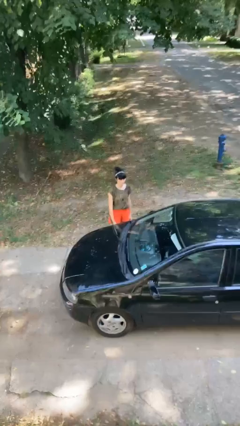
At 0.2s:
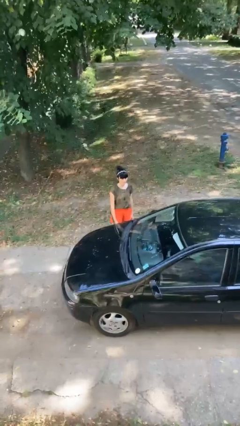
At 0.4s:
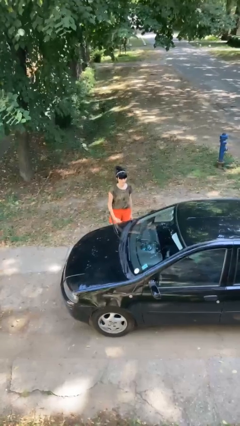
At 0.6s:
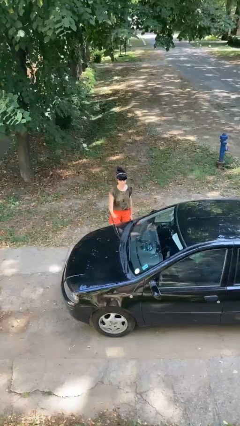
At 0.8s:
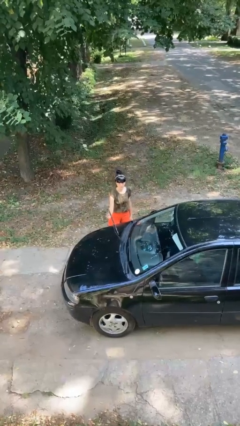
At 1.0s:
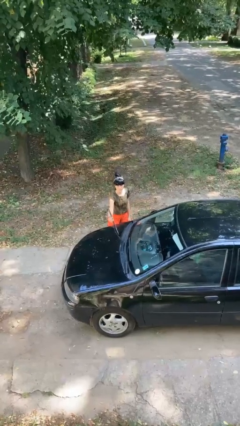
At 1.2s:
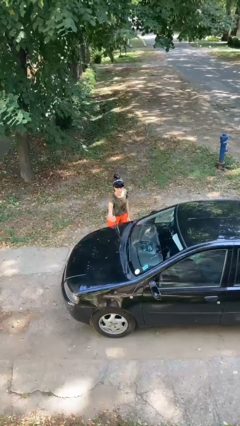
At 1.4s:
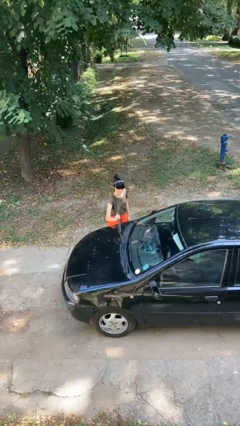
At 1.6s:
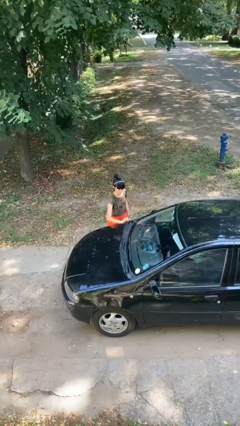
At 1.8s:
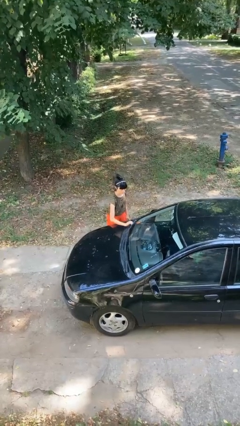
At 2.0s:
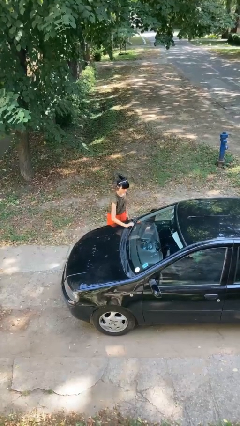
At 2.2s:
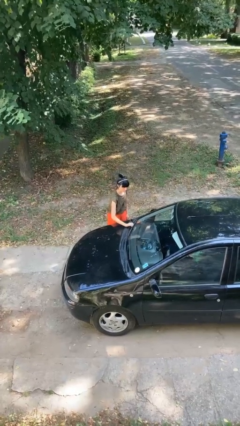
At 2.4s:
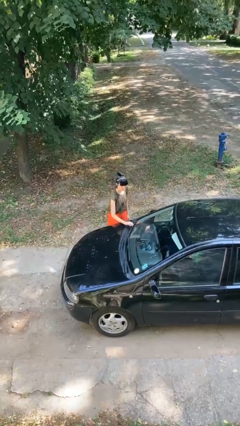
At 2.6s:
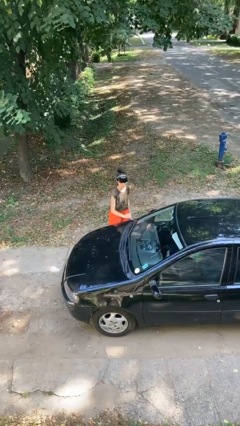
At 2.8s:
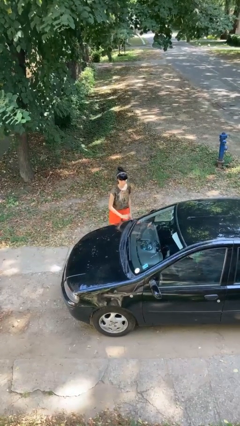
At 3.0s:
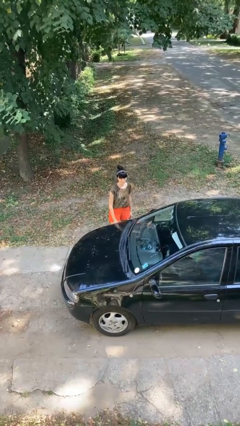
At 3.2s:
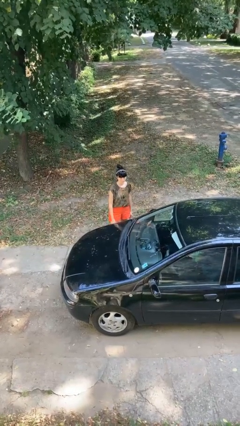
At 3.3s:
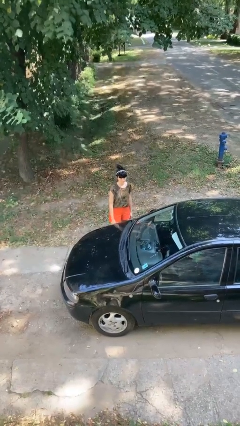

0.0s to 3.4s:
person flips down car wipers

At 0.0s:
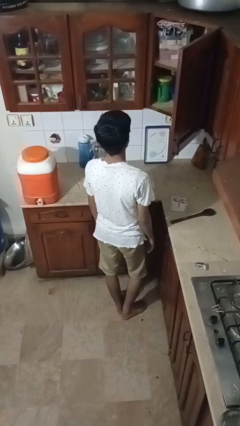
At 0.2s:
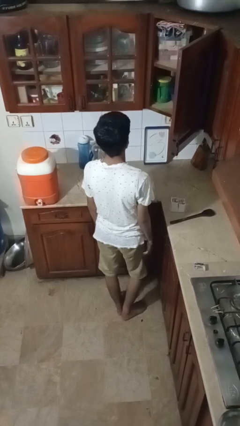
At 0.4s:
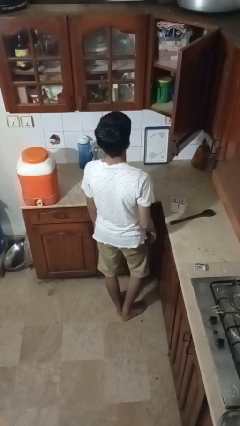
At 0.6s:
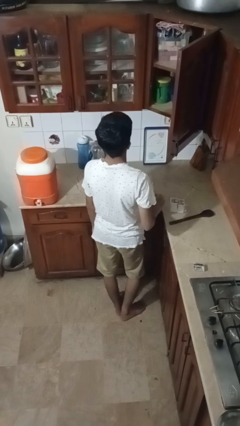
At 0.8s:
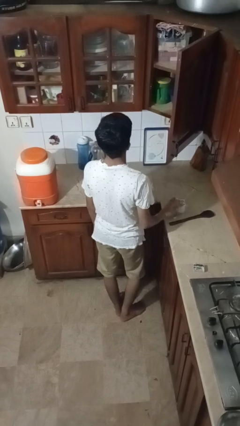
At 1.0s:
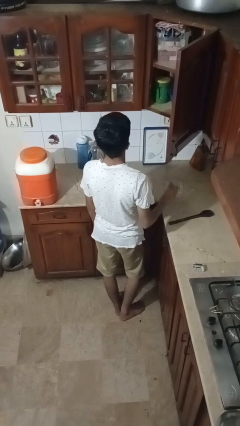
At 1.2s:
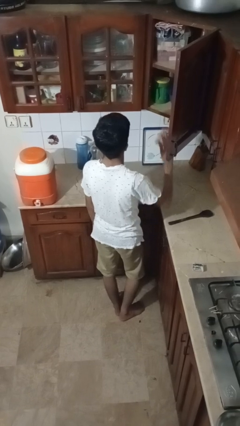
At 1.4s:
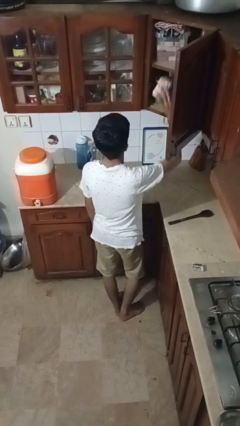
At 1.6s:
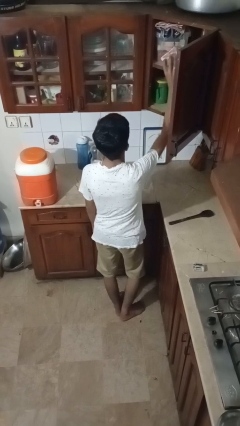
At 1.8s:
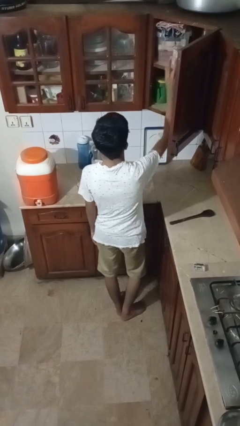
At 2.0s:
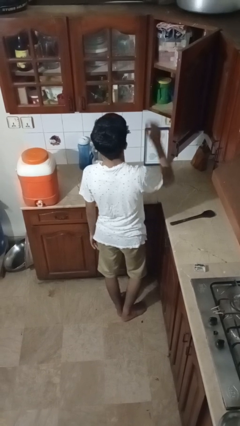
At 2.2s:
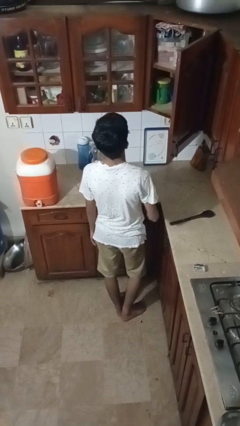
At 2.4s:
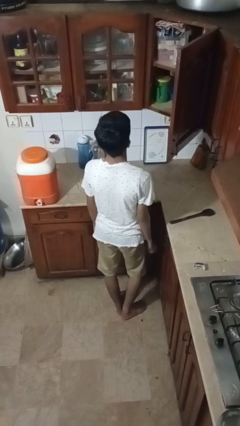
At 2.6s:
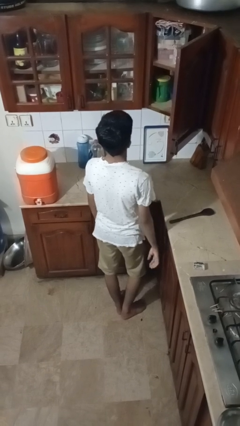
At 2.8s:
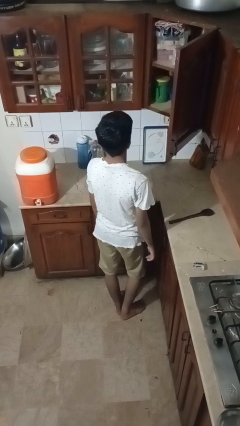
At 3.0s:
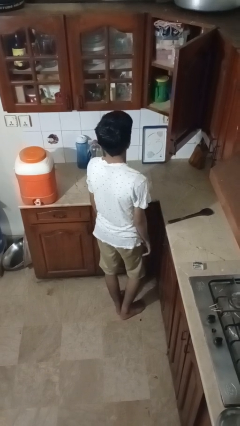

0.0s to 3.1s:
person puts object in cabinet

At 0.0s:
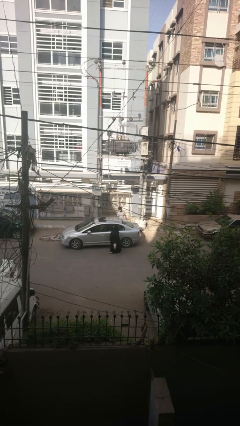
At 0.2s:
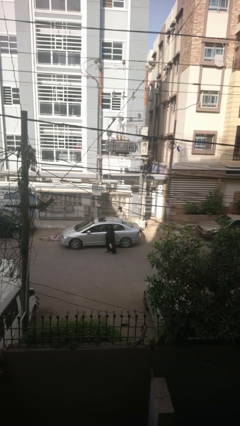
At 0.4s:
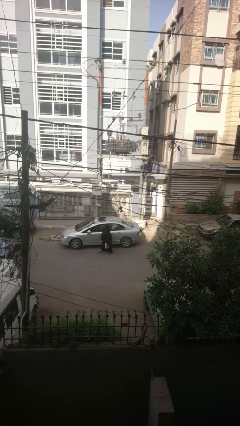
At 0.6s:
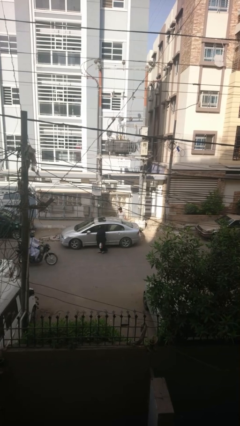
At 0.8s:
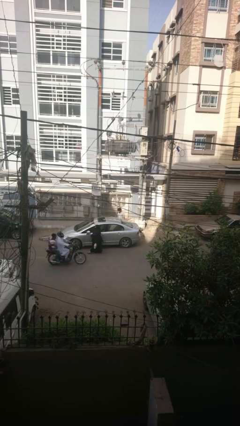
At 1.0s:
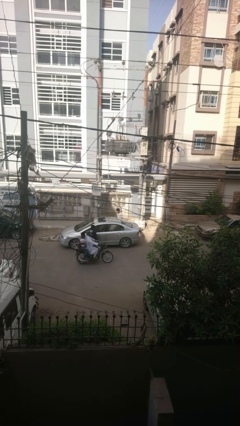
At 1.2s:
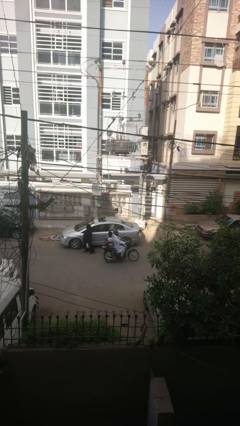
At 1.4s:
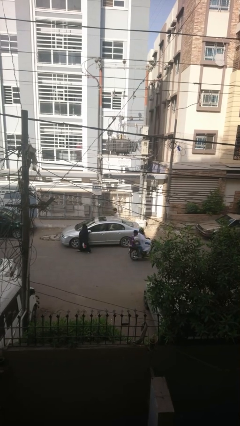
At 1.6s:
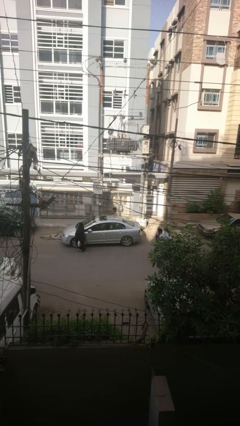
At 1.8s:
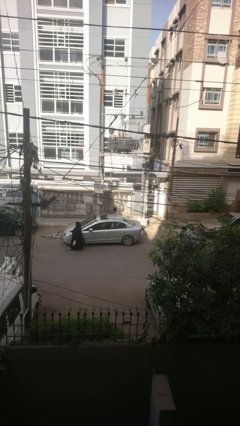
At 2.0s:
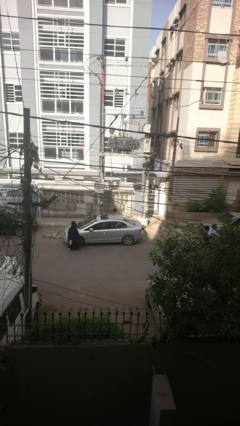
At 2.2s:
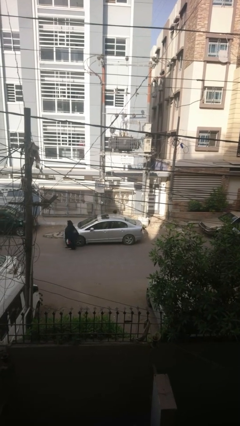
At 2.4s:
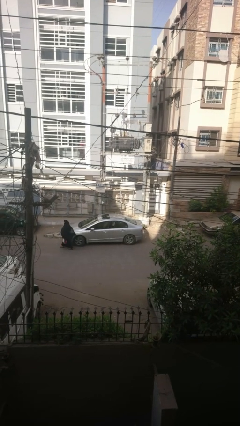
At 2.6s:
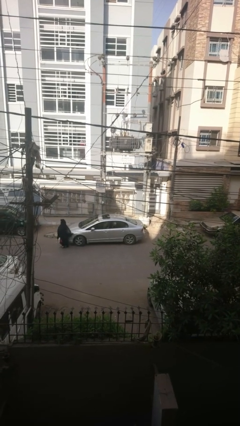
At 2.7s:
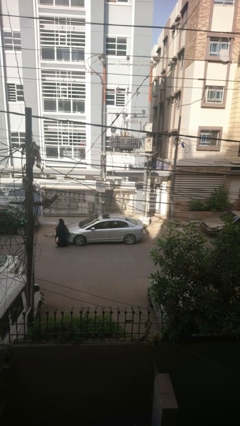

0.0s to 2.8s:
person enters car

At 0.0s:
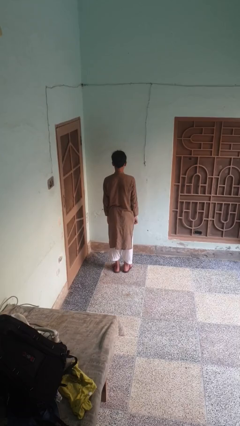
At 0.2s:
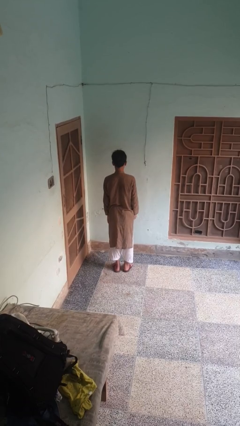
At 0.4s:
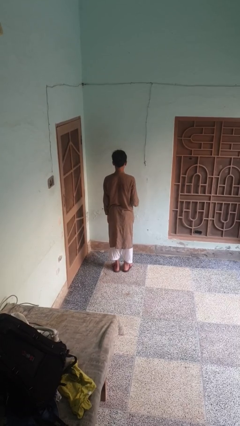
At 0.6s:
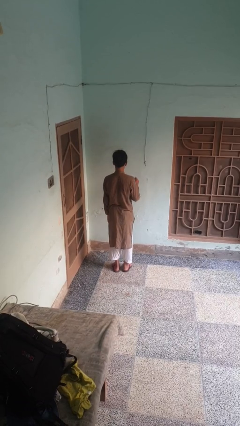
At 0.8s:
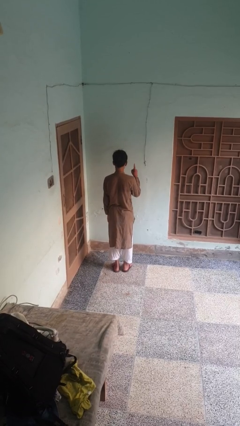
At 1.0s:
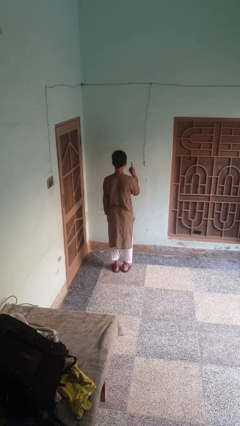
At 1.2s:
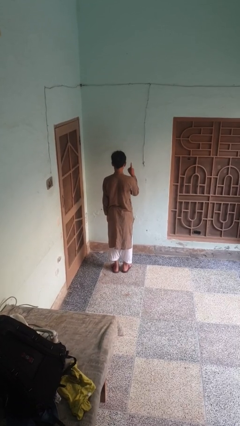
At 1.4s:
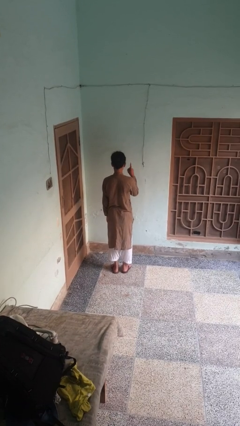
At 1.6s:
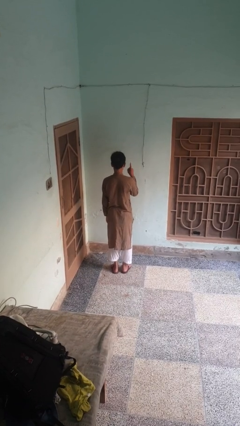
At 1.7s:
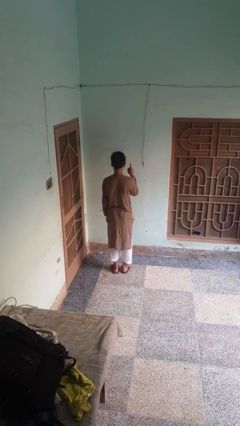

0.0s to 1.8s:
person gestures number one

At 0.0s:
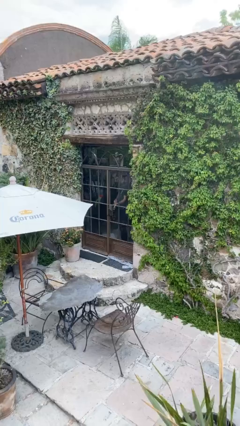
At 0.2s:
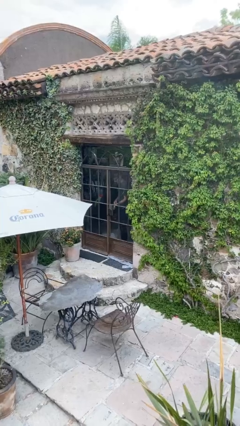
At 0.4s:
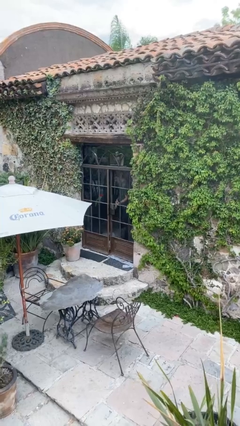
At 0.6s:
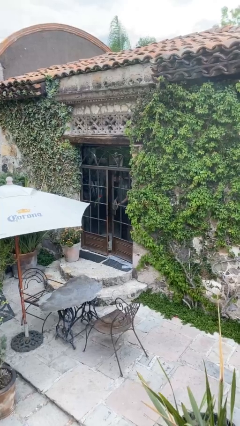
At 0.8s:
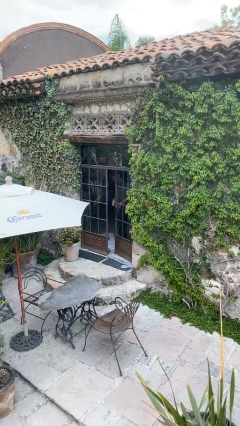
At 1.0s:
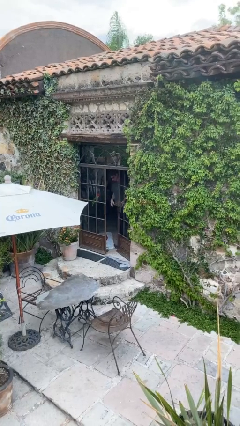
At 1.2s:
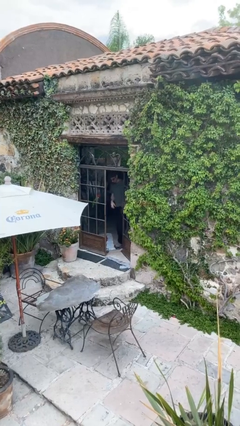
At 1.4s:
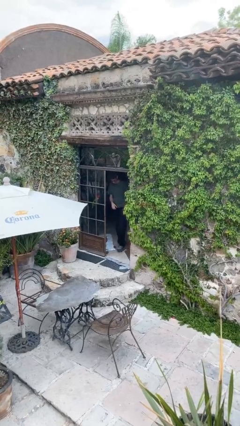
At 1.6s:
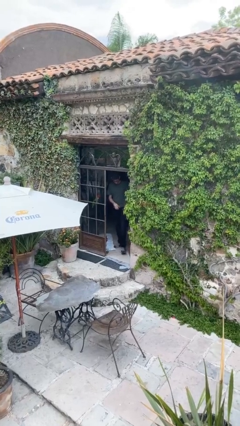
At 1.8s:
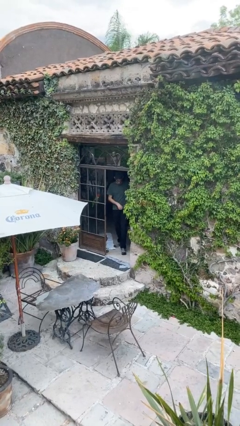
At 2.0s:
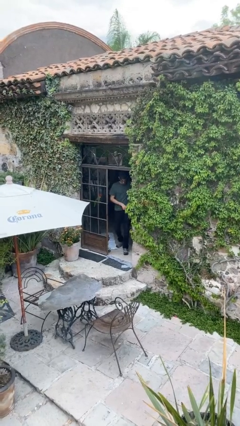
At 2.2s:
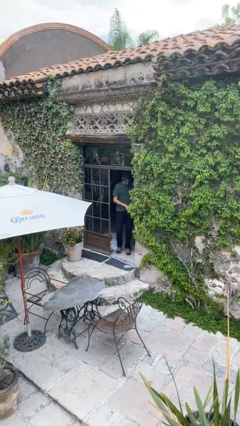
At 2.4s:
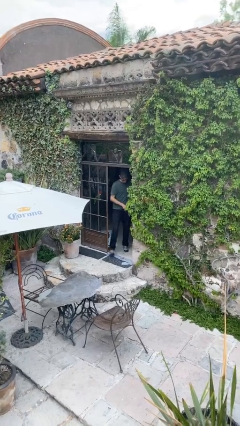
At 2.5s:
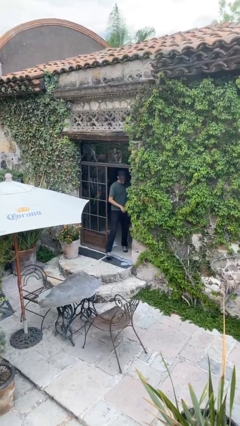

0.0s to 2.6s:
person opens facility door

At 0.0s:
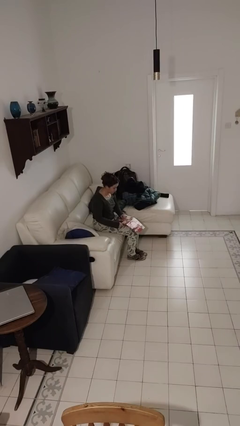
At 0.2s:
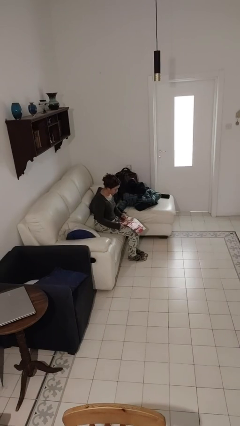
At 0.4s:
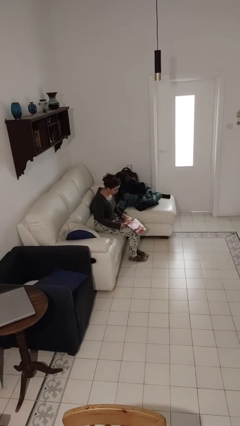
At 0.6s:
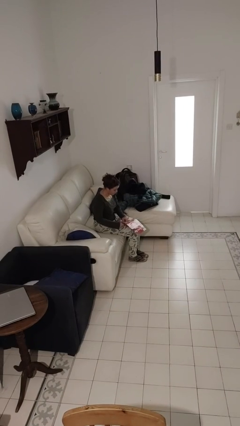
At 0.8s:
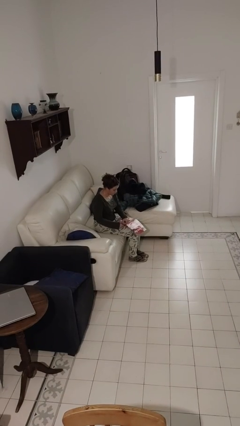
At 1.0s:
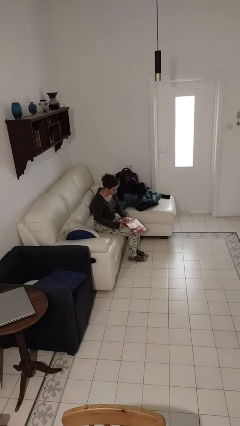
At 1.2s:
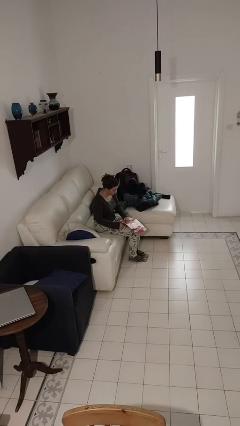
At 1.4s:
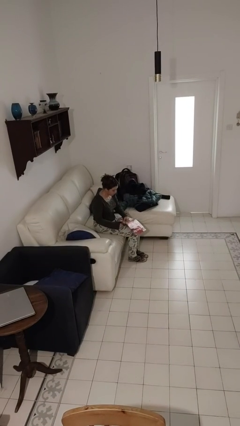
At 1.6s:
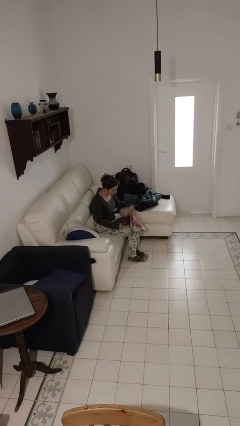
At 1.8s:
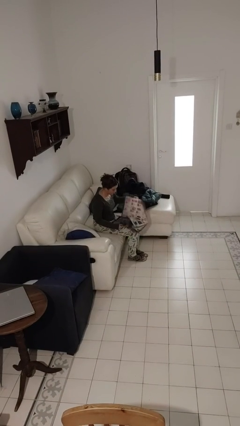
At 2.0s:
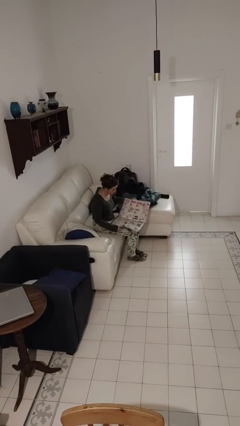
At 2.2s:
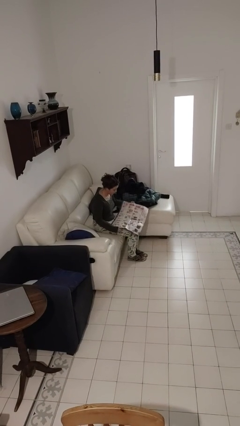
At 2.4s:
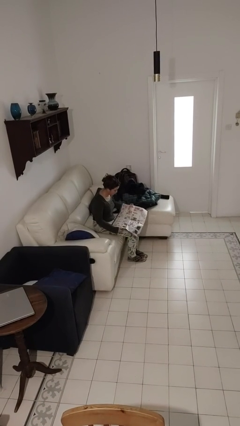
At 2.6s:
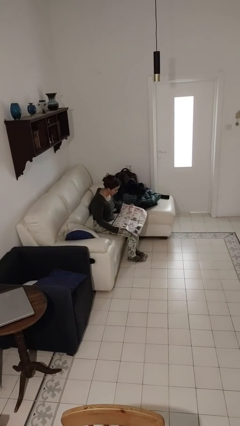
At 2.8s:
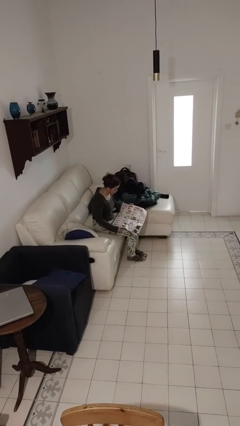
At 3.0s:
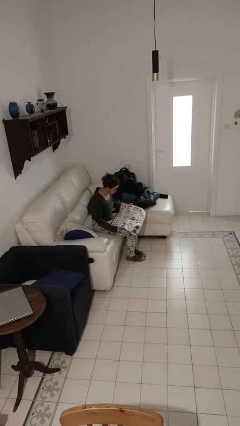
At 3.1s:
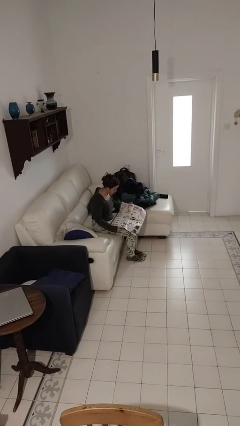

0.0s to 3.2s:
person reads newspaper

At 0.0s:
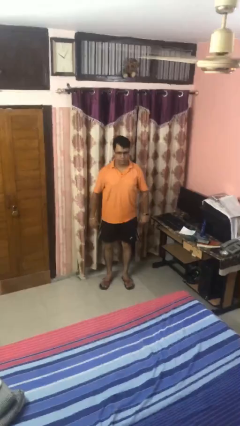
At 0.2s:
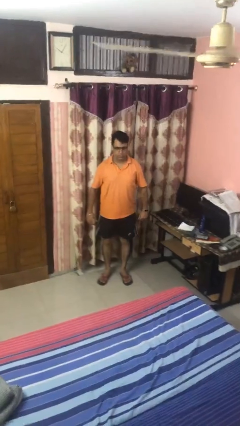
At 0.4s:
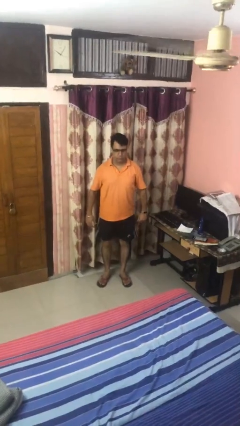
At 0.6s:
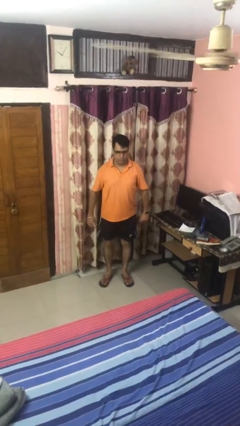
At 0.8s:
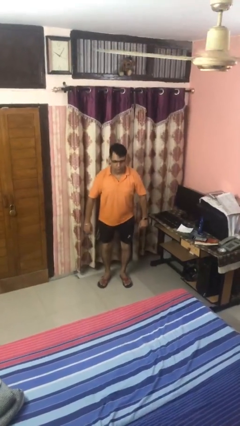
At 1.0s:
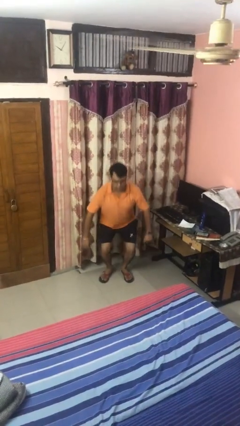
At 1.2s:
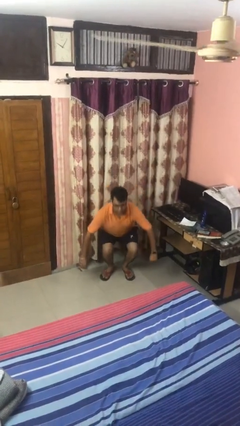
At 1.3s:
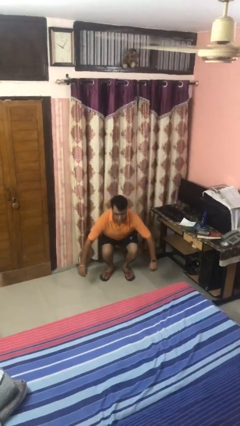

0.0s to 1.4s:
person squats
